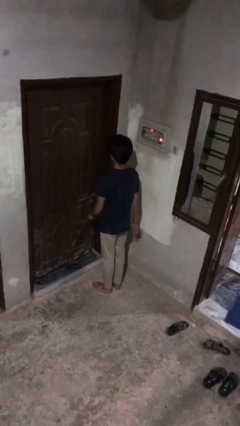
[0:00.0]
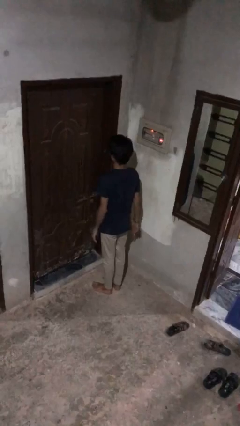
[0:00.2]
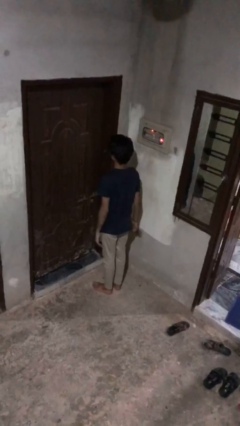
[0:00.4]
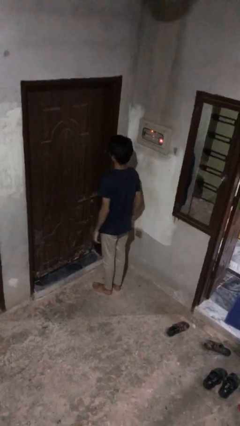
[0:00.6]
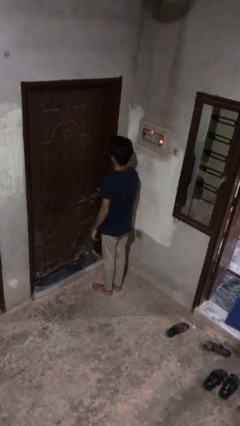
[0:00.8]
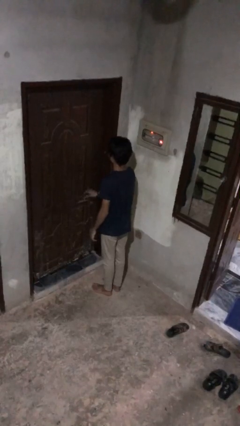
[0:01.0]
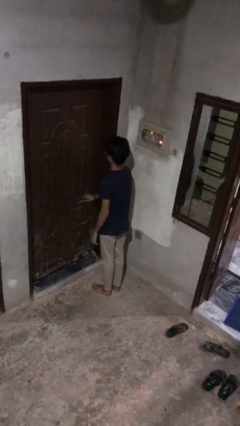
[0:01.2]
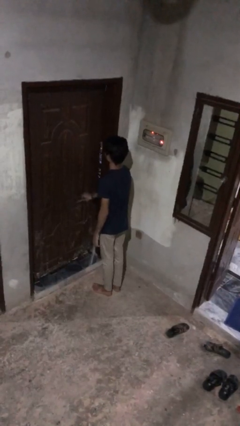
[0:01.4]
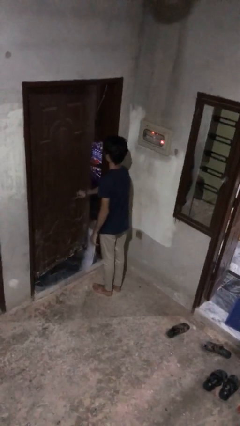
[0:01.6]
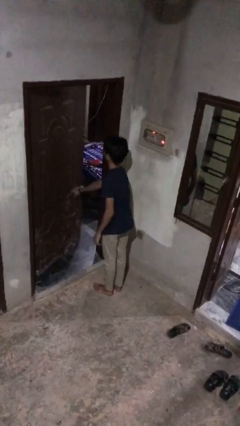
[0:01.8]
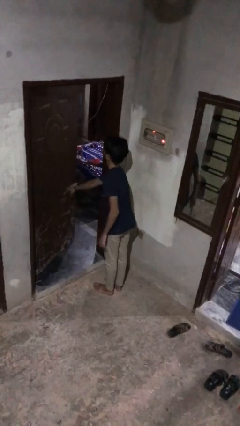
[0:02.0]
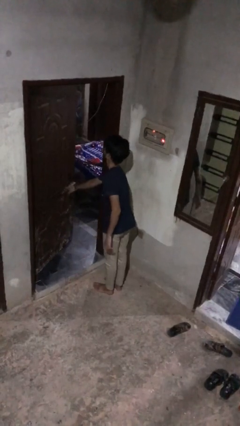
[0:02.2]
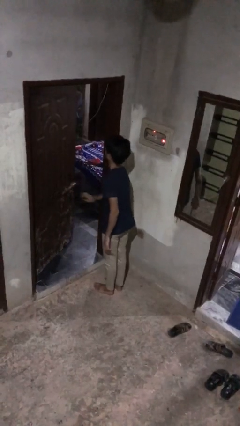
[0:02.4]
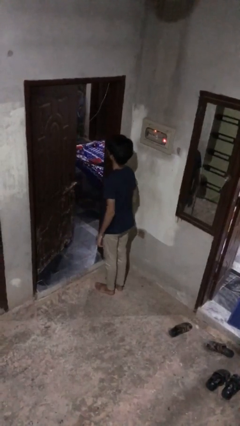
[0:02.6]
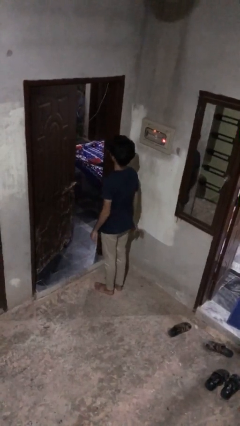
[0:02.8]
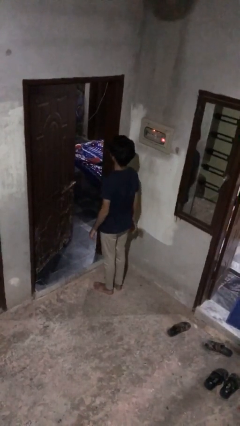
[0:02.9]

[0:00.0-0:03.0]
person opens facility door

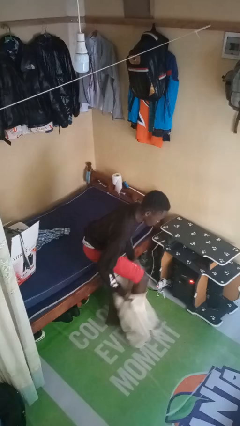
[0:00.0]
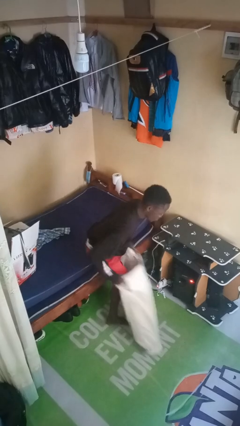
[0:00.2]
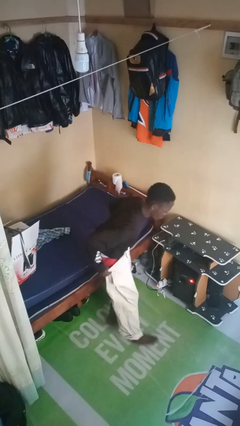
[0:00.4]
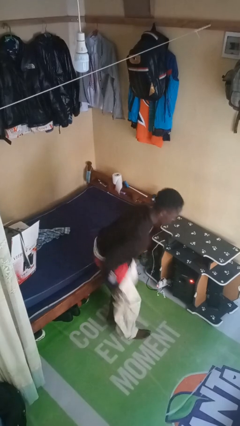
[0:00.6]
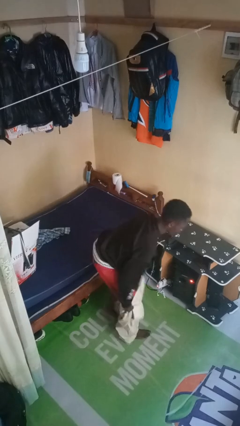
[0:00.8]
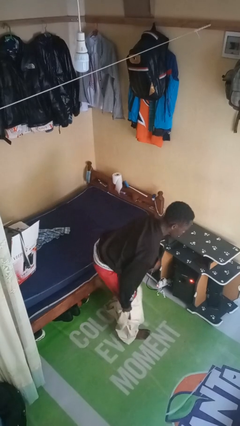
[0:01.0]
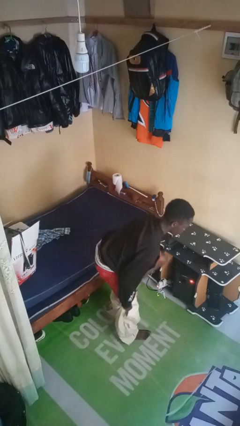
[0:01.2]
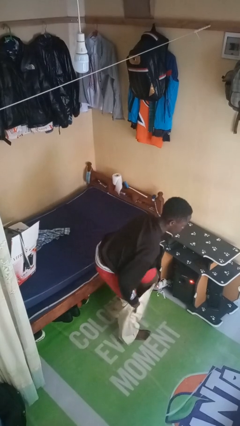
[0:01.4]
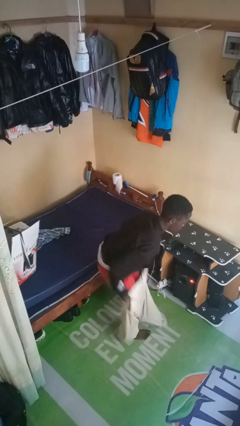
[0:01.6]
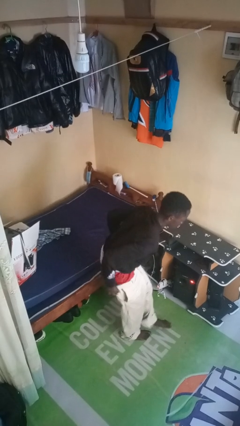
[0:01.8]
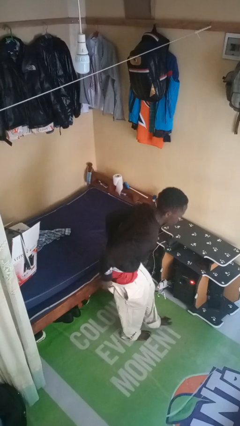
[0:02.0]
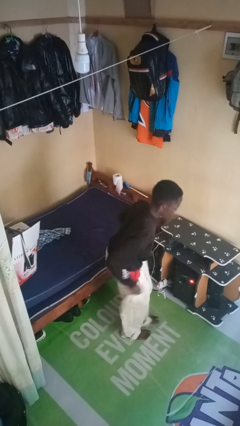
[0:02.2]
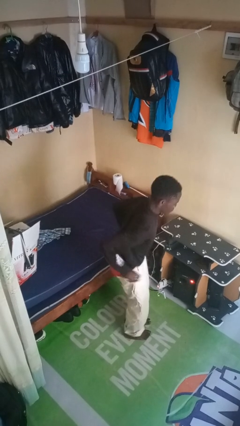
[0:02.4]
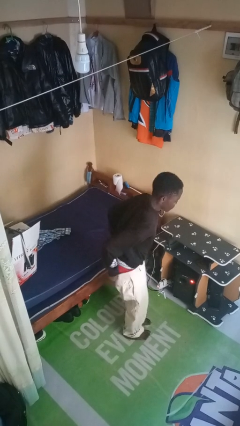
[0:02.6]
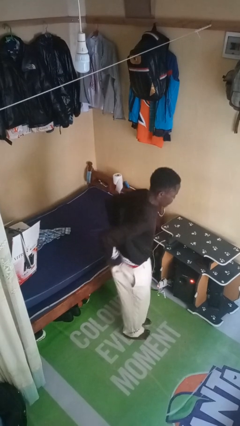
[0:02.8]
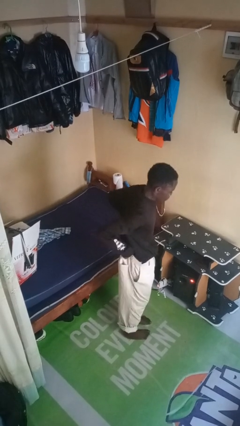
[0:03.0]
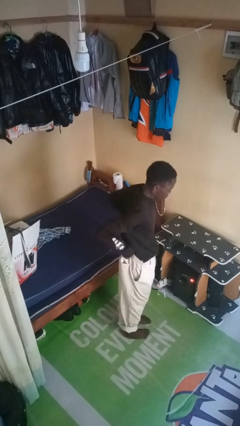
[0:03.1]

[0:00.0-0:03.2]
person puts on pants

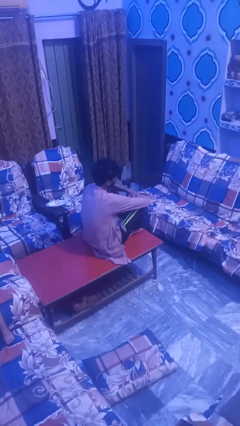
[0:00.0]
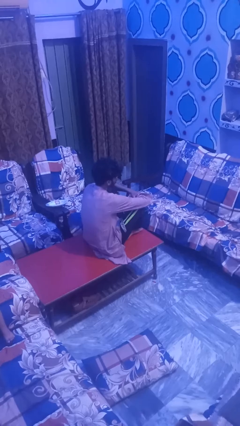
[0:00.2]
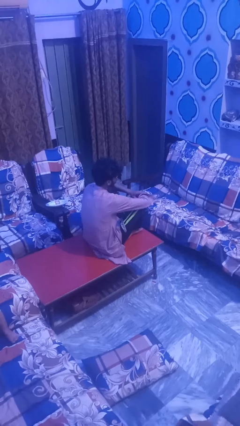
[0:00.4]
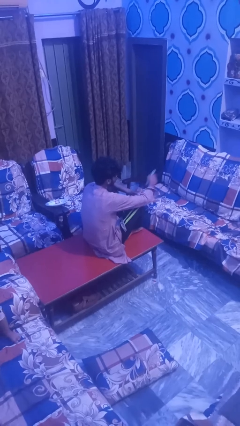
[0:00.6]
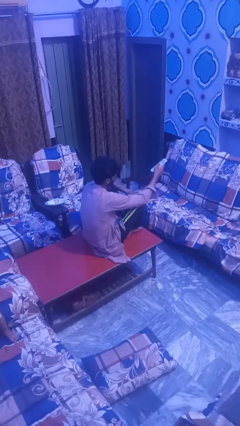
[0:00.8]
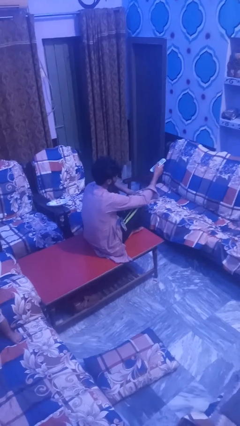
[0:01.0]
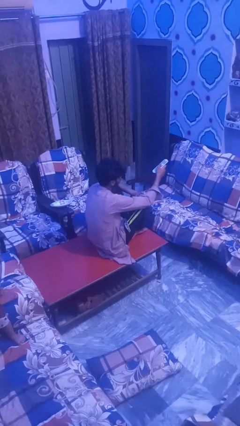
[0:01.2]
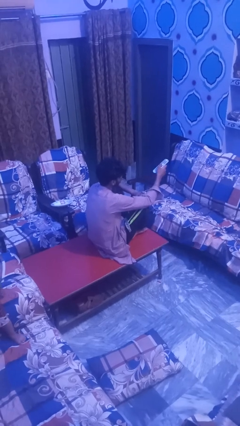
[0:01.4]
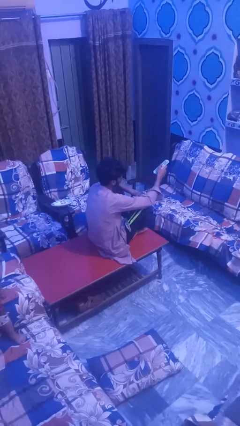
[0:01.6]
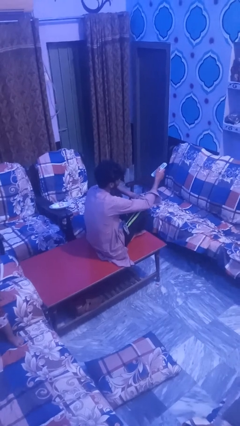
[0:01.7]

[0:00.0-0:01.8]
person uses television remote

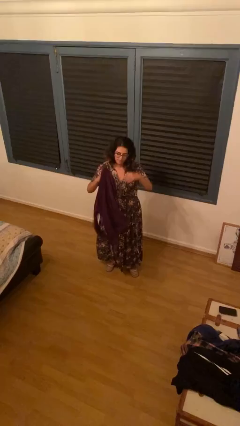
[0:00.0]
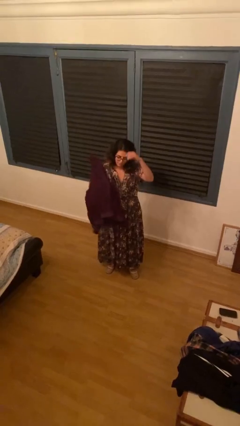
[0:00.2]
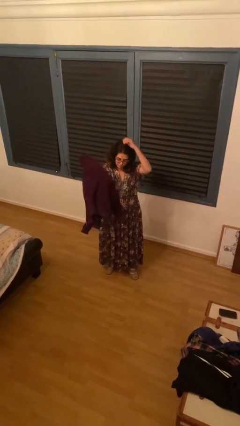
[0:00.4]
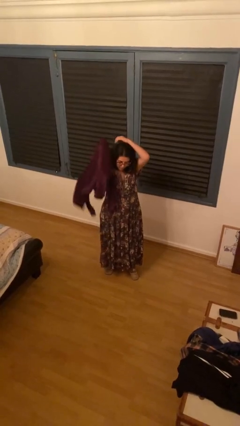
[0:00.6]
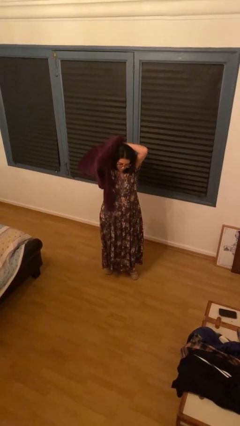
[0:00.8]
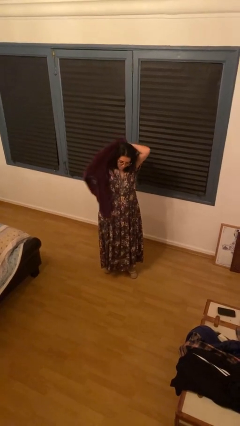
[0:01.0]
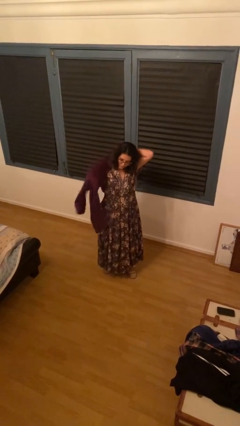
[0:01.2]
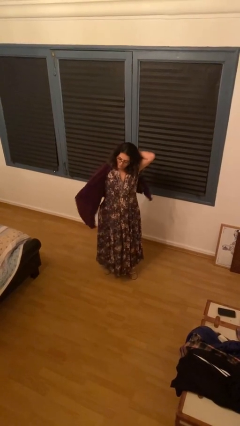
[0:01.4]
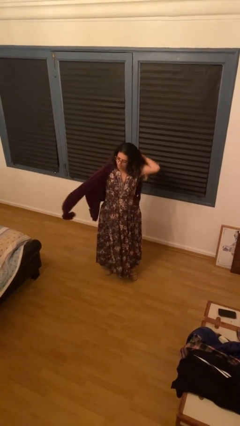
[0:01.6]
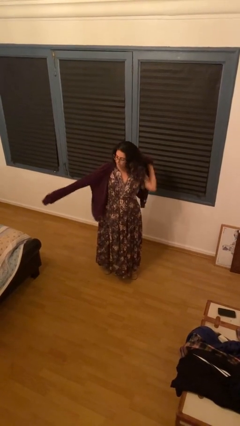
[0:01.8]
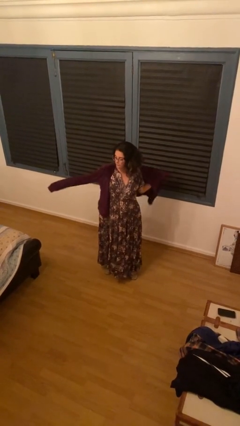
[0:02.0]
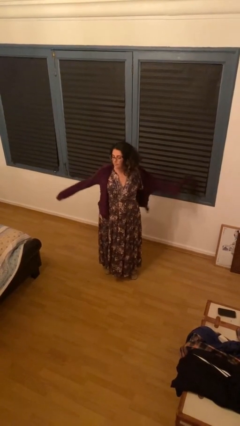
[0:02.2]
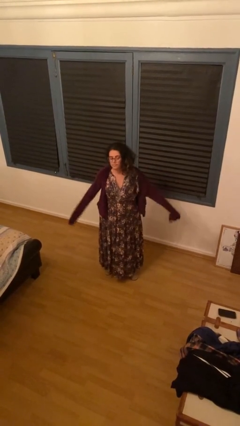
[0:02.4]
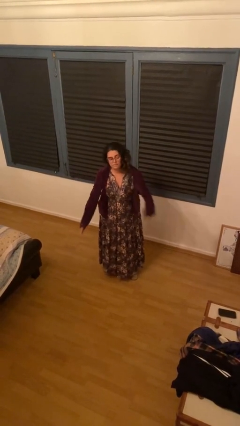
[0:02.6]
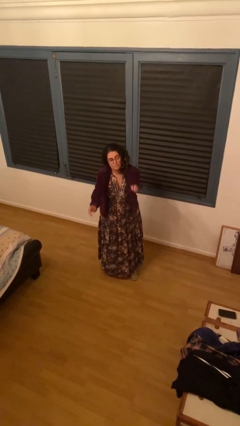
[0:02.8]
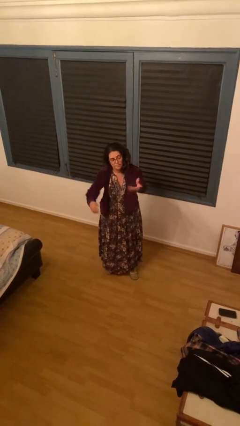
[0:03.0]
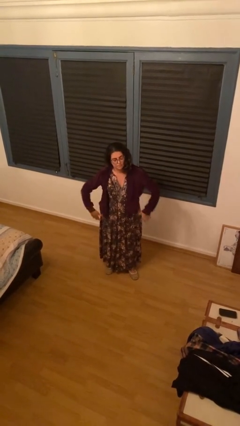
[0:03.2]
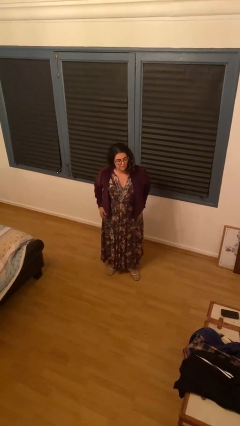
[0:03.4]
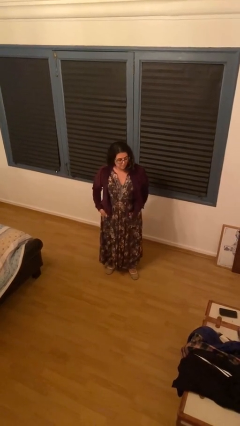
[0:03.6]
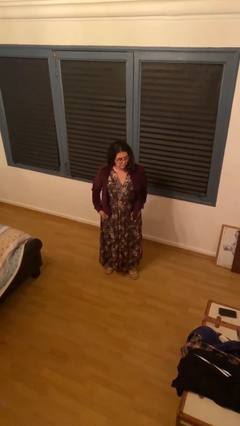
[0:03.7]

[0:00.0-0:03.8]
person puts on jacket

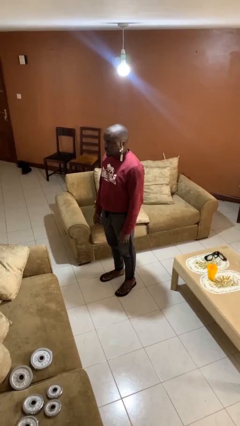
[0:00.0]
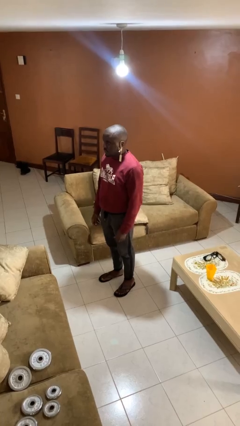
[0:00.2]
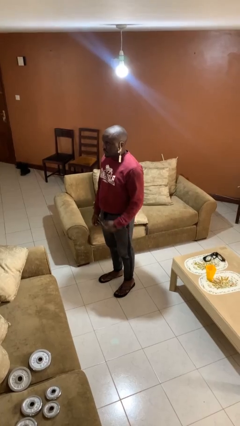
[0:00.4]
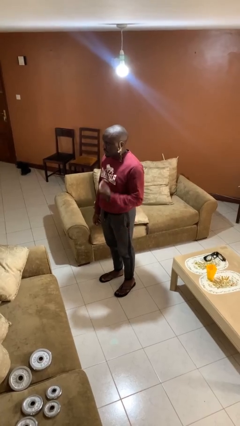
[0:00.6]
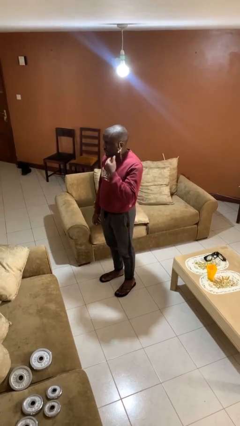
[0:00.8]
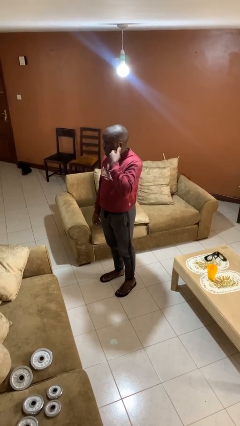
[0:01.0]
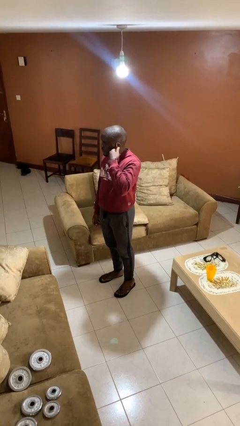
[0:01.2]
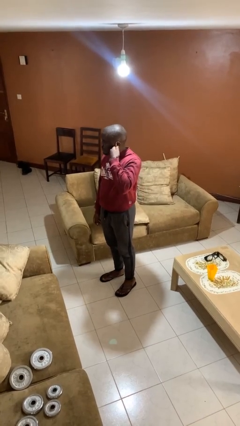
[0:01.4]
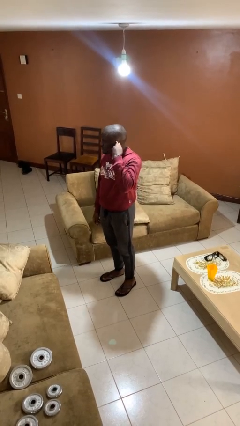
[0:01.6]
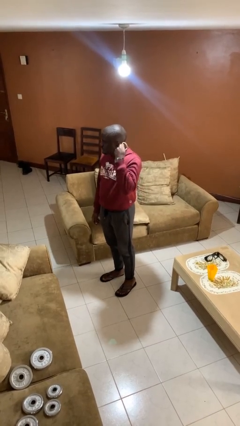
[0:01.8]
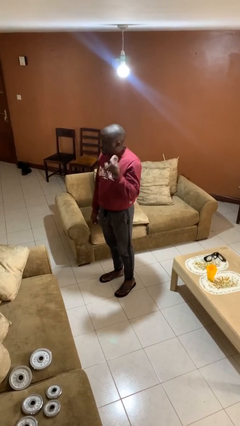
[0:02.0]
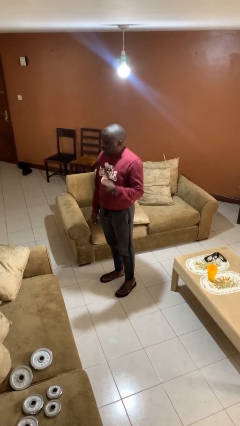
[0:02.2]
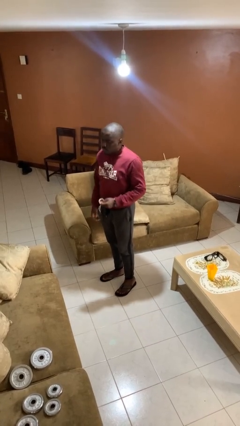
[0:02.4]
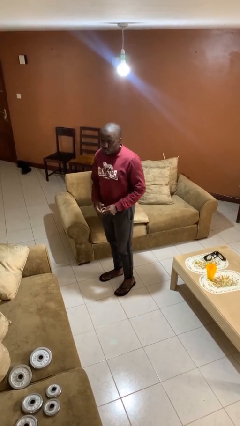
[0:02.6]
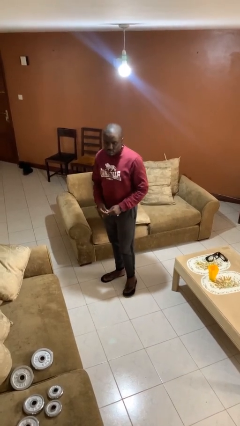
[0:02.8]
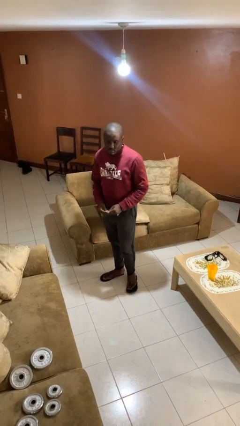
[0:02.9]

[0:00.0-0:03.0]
person takes off earrings

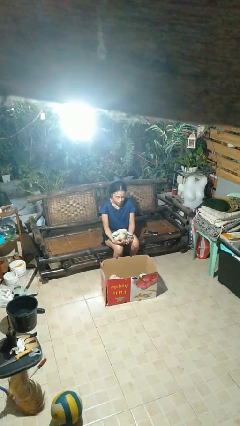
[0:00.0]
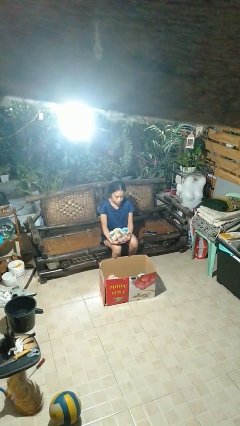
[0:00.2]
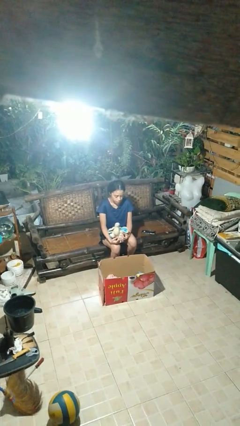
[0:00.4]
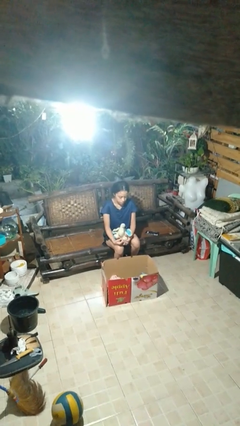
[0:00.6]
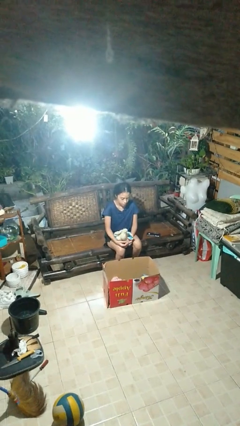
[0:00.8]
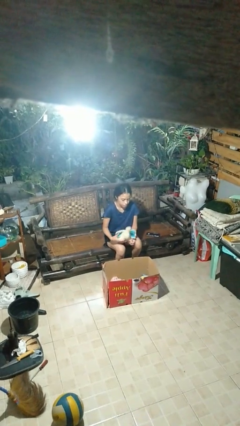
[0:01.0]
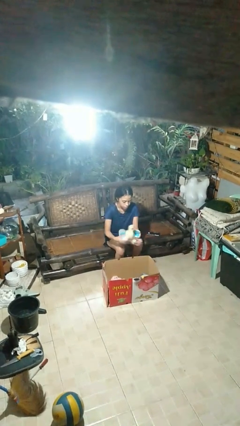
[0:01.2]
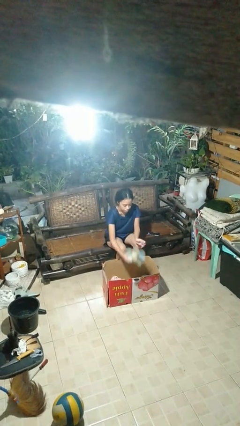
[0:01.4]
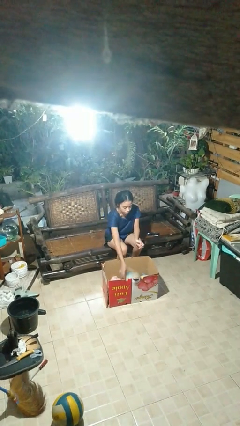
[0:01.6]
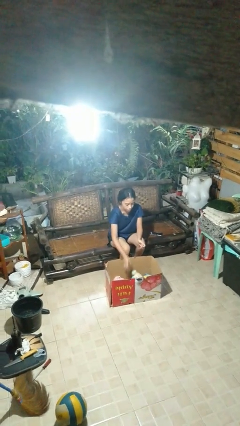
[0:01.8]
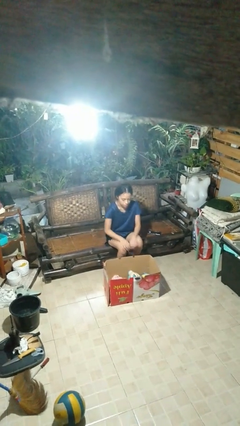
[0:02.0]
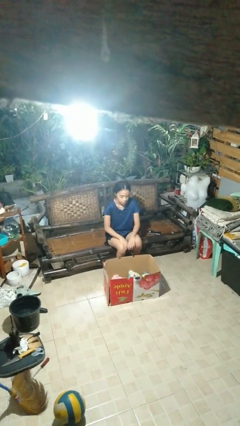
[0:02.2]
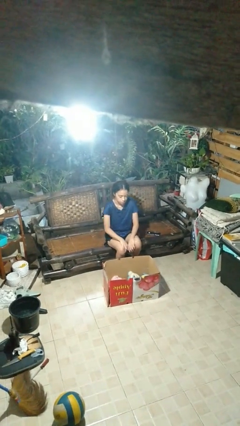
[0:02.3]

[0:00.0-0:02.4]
person puts object into box
